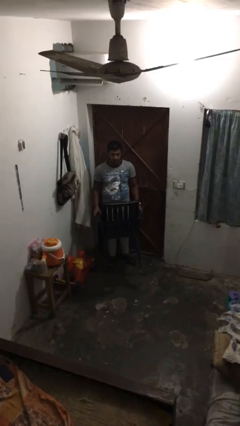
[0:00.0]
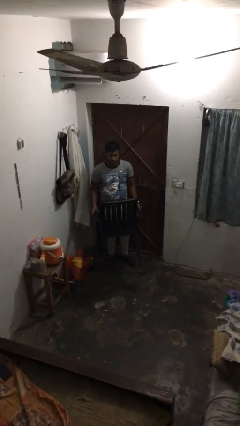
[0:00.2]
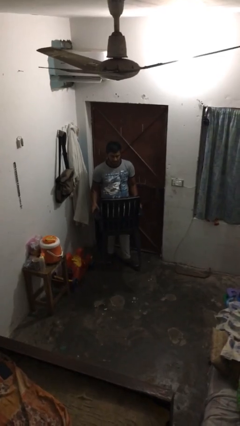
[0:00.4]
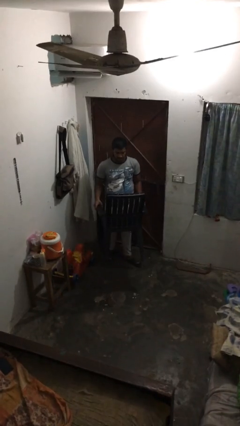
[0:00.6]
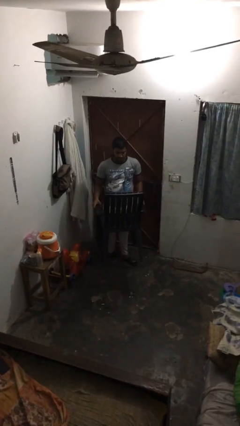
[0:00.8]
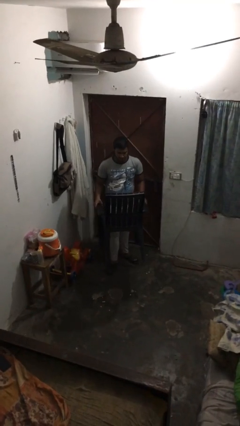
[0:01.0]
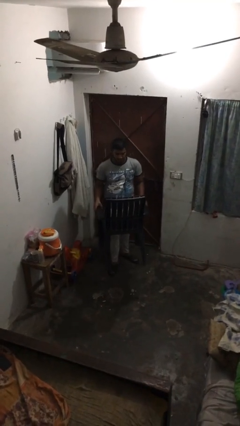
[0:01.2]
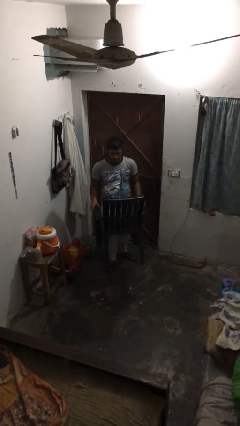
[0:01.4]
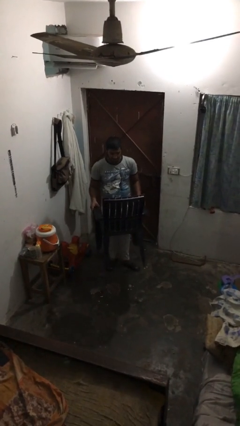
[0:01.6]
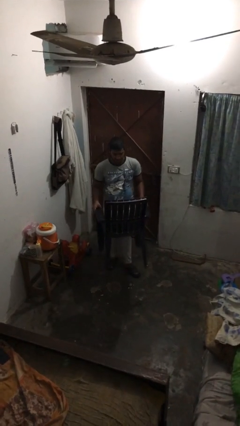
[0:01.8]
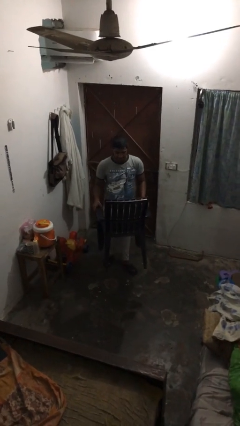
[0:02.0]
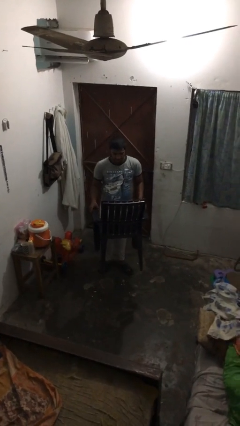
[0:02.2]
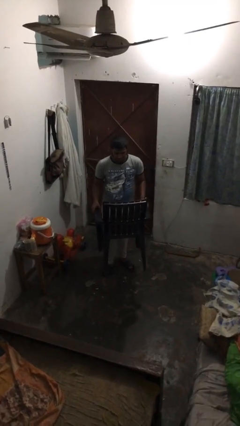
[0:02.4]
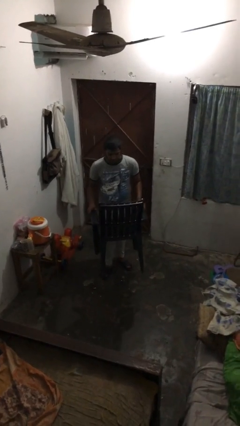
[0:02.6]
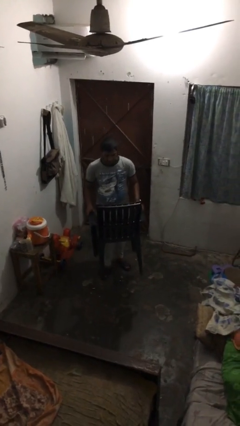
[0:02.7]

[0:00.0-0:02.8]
person carries heavy object

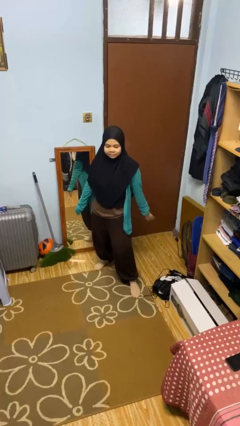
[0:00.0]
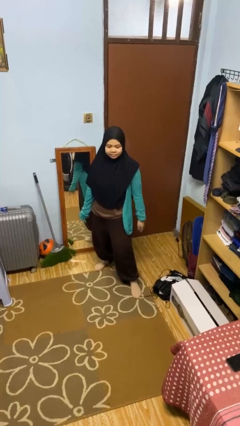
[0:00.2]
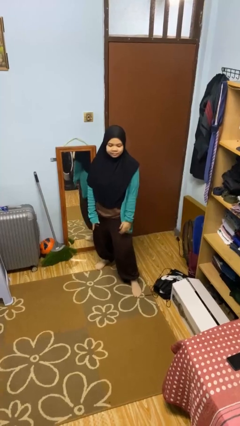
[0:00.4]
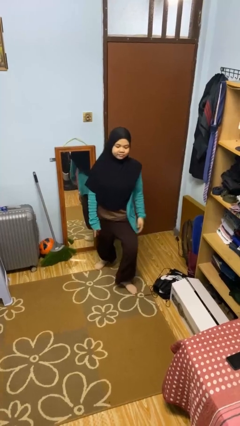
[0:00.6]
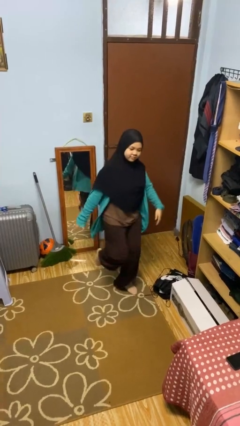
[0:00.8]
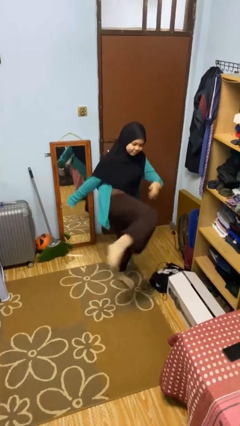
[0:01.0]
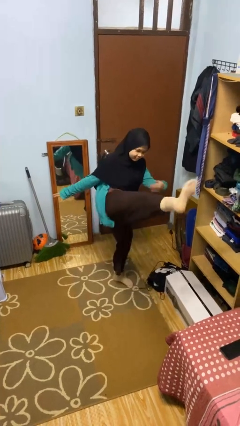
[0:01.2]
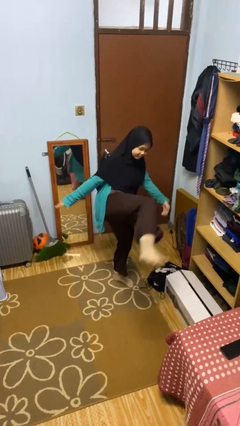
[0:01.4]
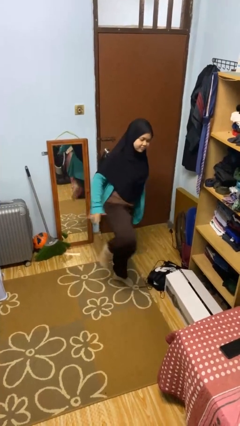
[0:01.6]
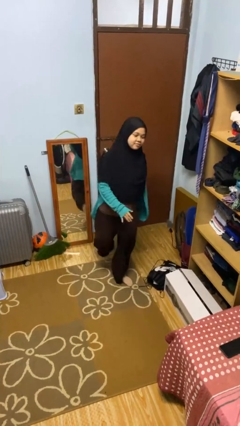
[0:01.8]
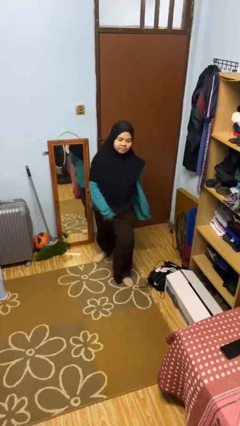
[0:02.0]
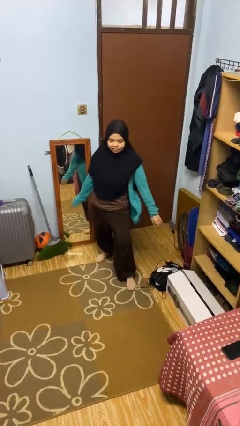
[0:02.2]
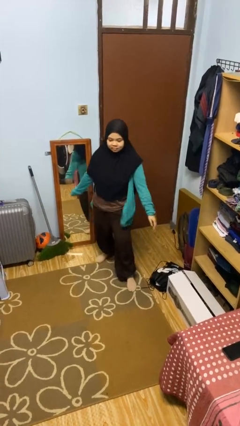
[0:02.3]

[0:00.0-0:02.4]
person karate kicks

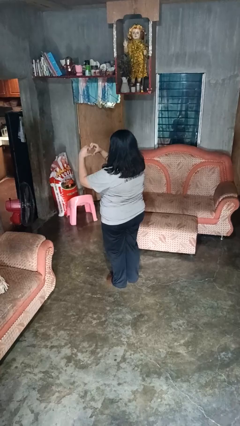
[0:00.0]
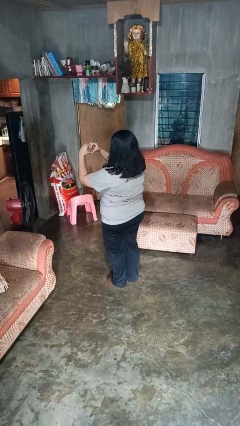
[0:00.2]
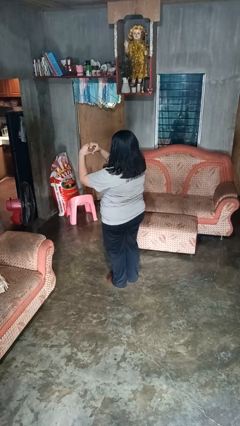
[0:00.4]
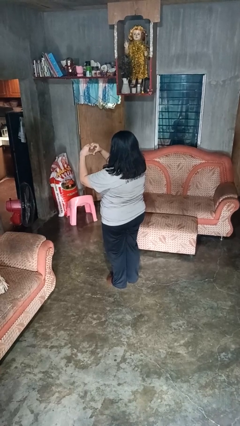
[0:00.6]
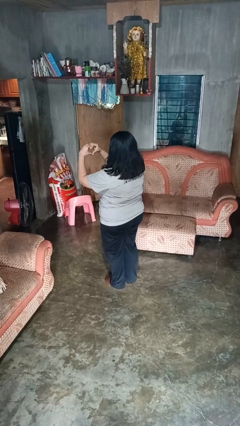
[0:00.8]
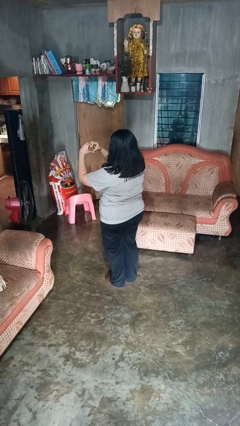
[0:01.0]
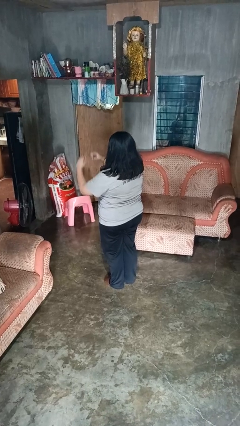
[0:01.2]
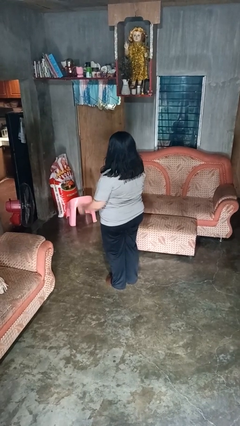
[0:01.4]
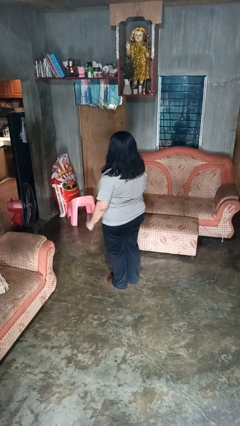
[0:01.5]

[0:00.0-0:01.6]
person gestures heart

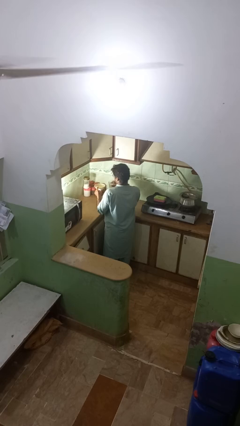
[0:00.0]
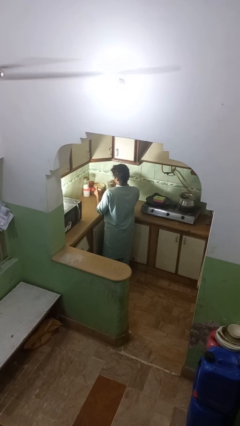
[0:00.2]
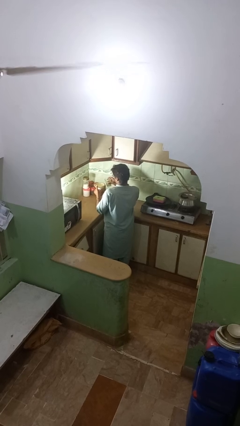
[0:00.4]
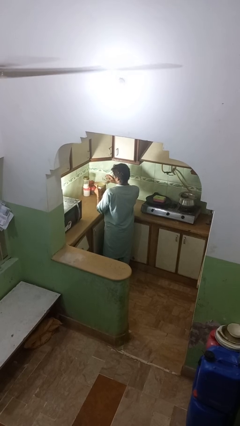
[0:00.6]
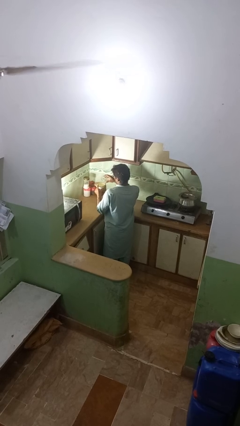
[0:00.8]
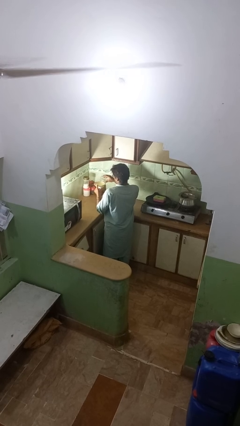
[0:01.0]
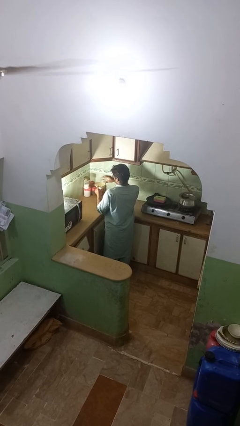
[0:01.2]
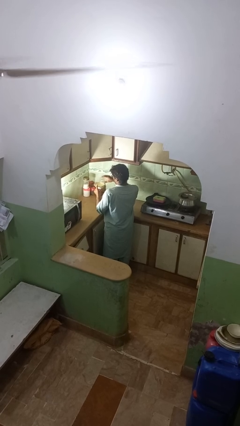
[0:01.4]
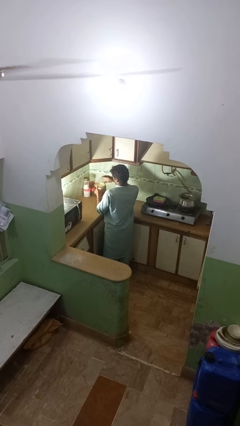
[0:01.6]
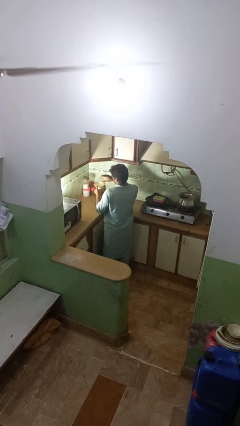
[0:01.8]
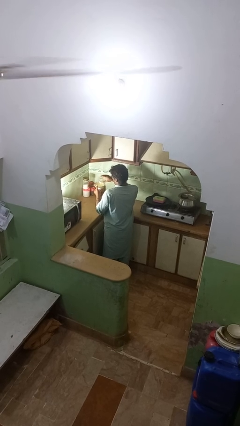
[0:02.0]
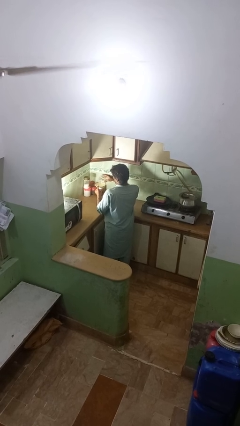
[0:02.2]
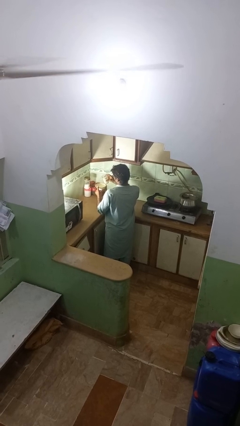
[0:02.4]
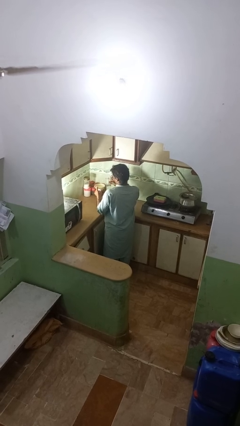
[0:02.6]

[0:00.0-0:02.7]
person pours into bowl

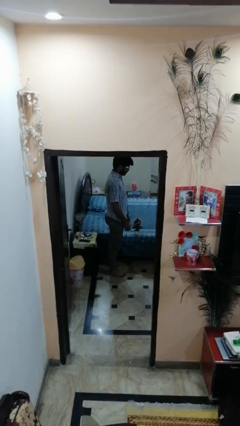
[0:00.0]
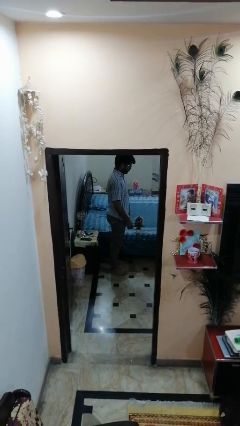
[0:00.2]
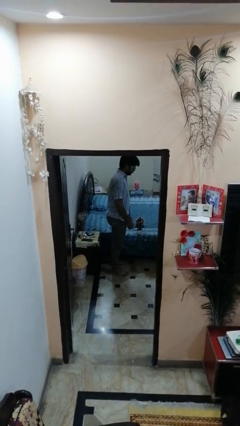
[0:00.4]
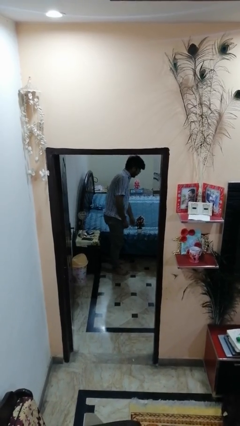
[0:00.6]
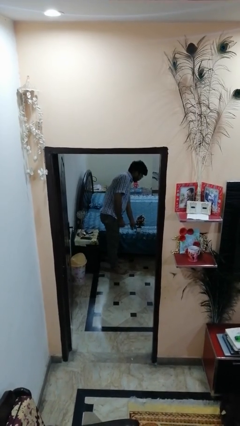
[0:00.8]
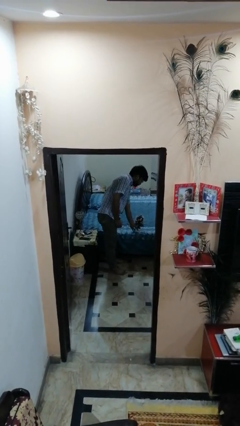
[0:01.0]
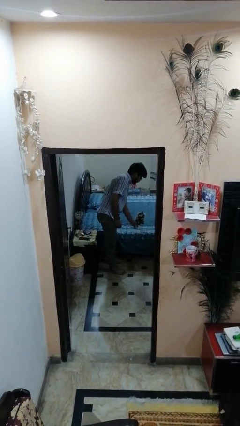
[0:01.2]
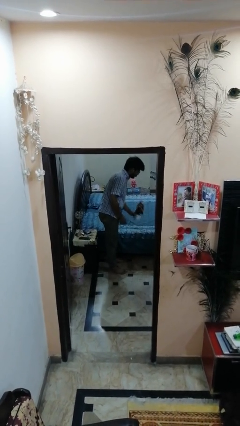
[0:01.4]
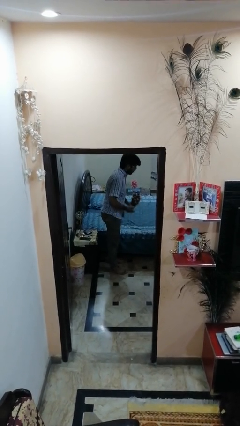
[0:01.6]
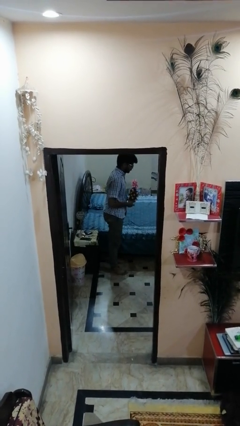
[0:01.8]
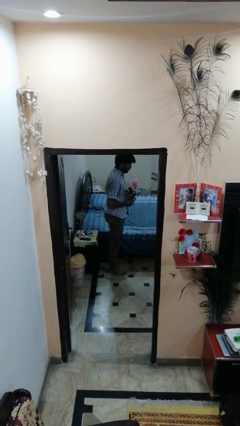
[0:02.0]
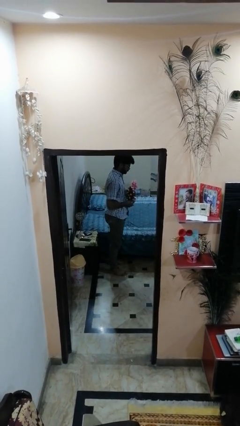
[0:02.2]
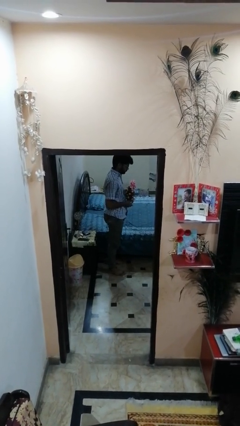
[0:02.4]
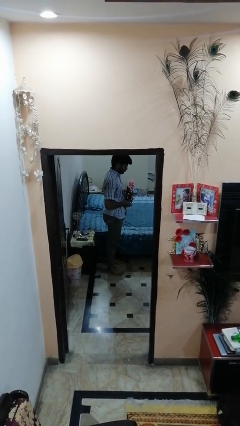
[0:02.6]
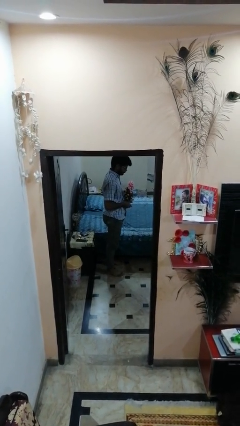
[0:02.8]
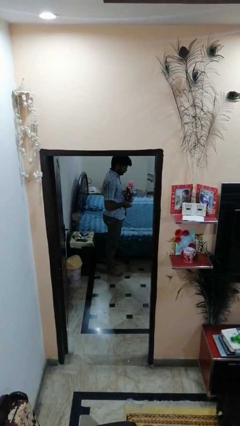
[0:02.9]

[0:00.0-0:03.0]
person picks up object from bed

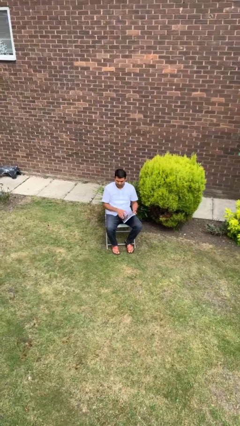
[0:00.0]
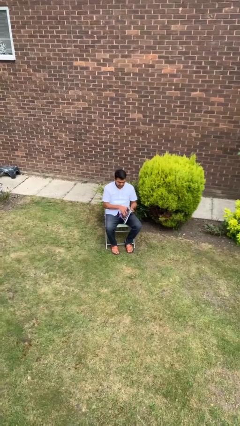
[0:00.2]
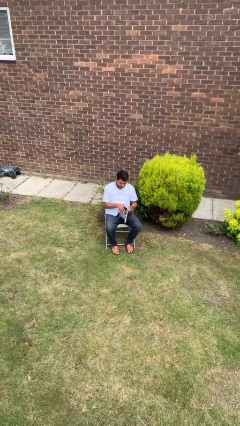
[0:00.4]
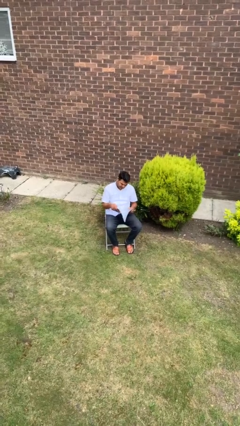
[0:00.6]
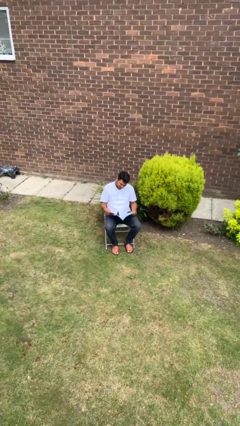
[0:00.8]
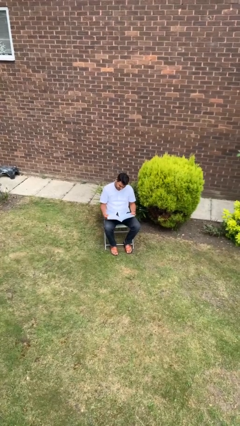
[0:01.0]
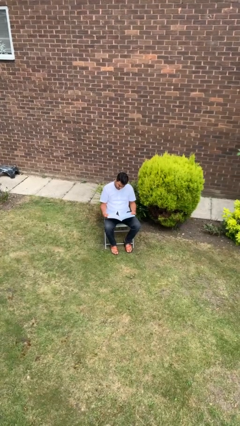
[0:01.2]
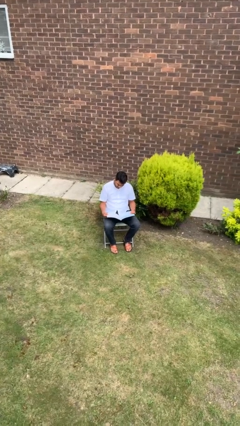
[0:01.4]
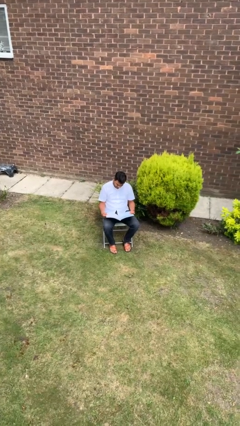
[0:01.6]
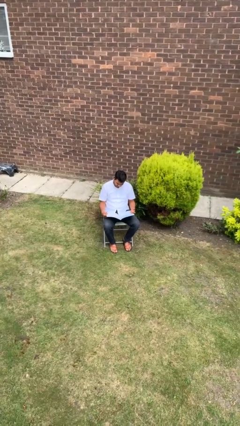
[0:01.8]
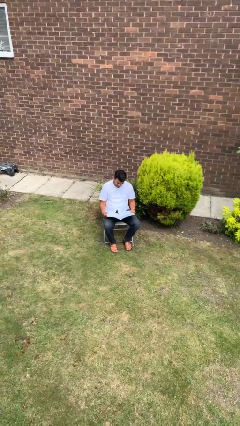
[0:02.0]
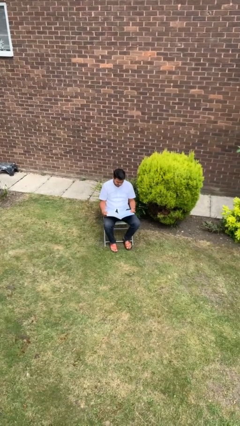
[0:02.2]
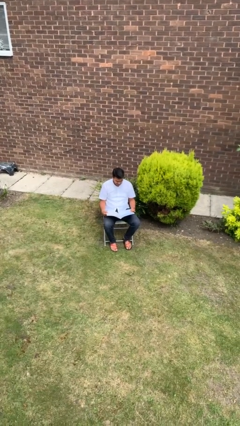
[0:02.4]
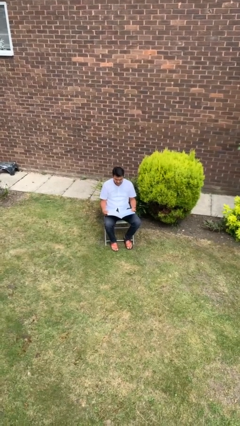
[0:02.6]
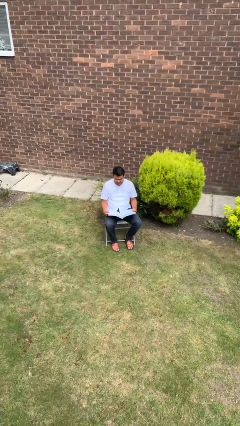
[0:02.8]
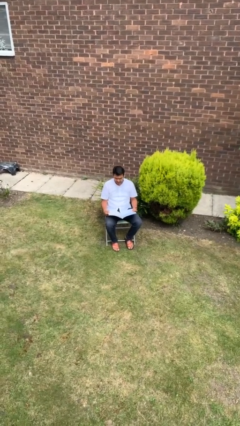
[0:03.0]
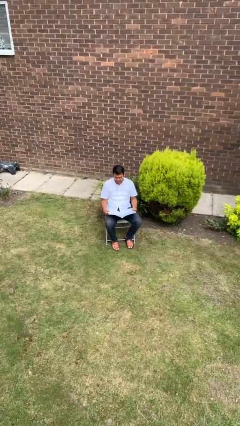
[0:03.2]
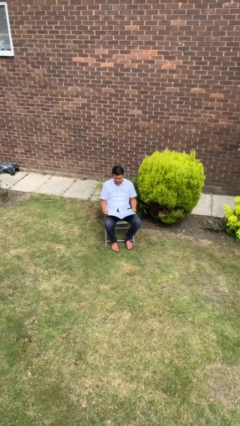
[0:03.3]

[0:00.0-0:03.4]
person reads magazine

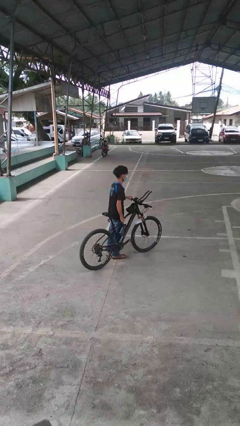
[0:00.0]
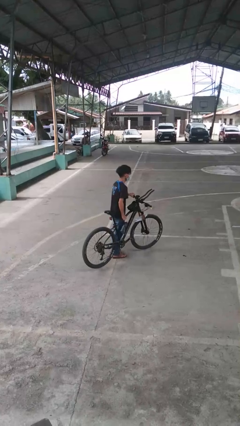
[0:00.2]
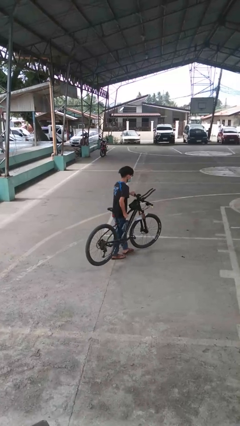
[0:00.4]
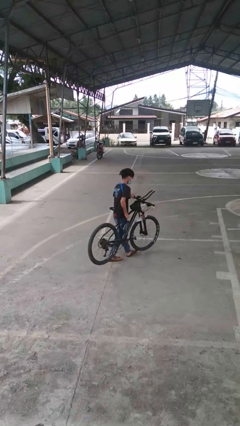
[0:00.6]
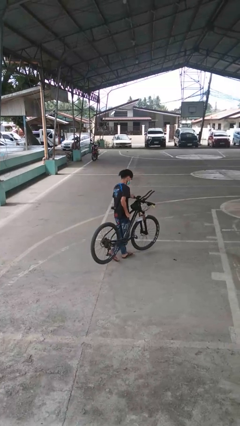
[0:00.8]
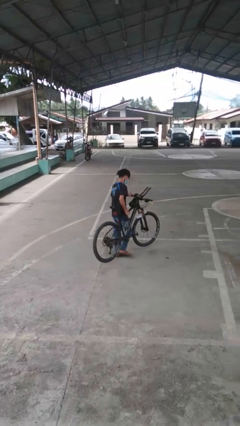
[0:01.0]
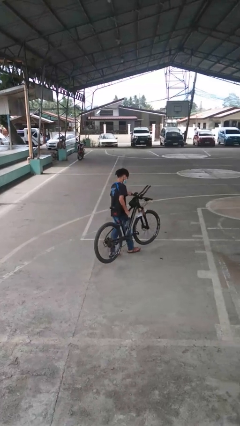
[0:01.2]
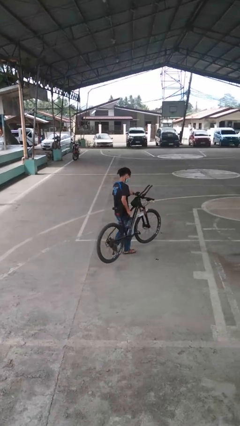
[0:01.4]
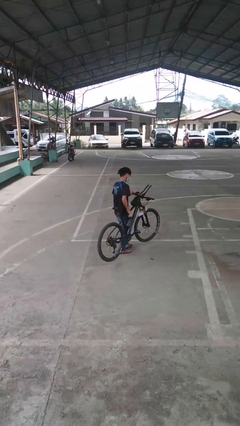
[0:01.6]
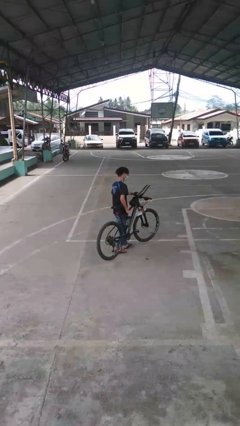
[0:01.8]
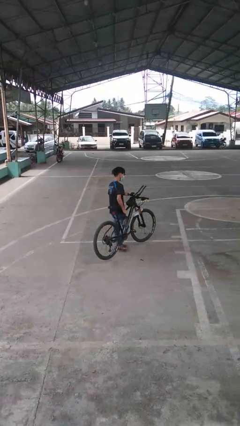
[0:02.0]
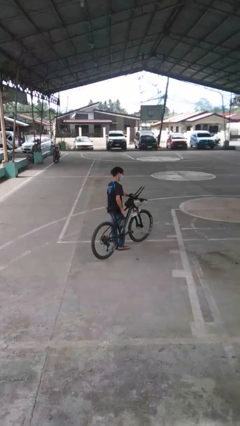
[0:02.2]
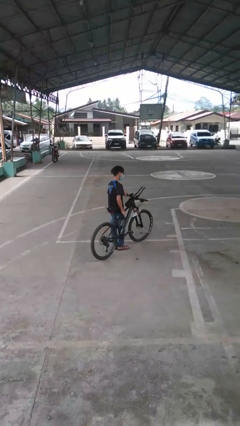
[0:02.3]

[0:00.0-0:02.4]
person carries bicycle
